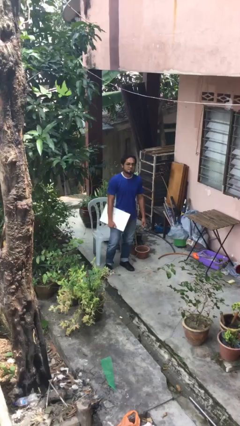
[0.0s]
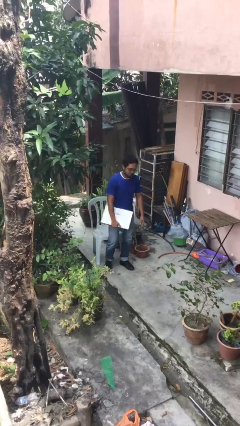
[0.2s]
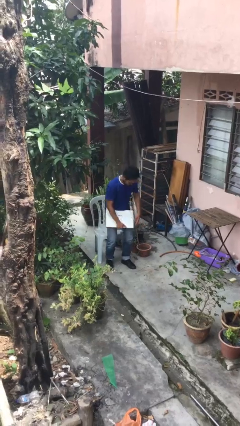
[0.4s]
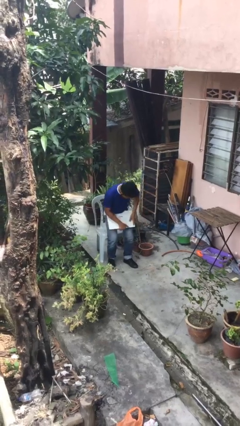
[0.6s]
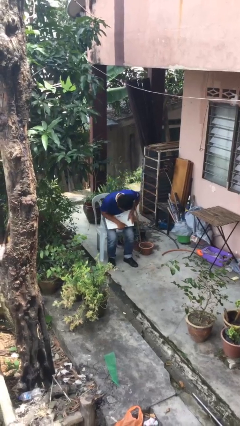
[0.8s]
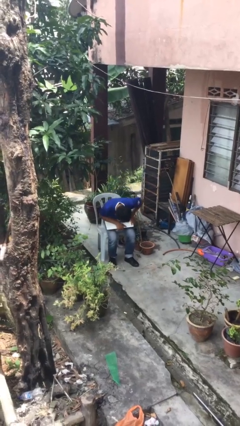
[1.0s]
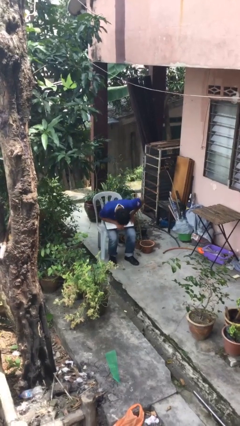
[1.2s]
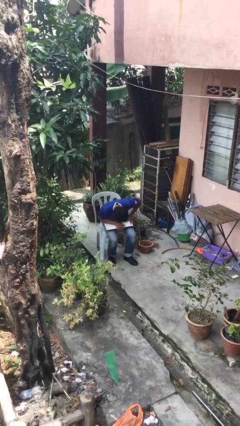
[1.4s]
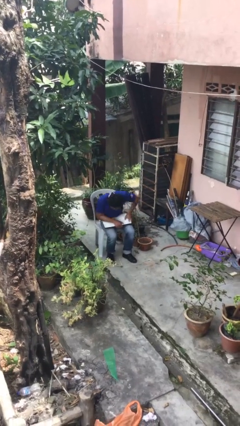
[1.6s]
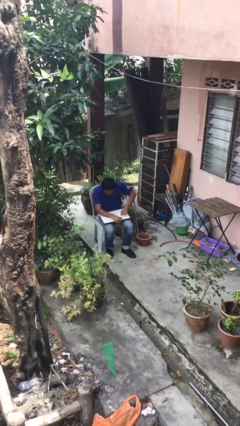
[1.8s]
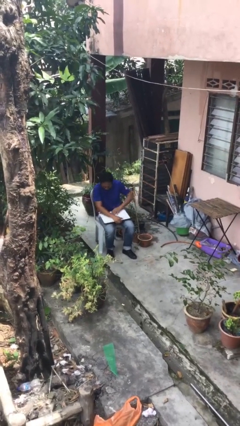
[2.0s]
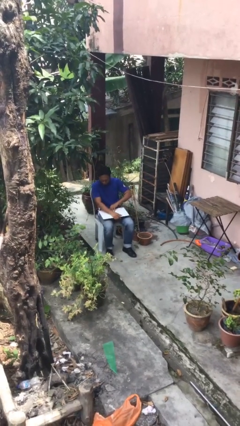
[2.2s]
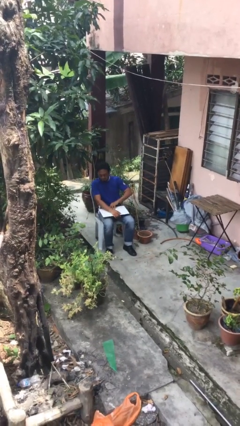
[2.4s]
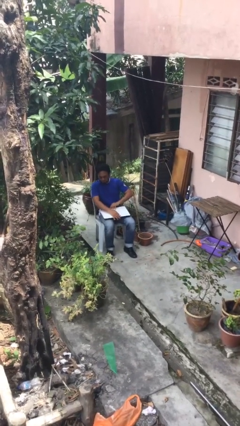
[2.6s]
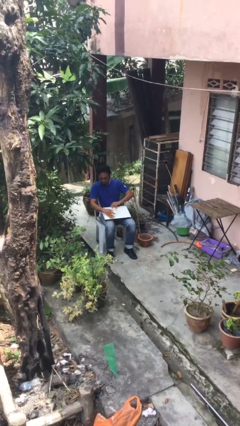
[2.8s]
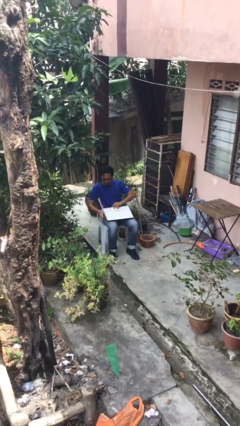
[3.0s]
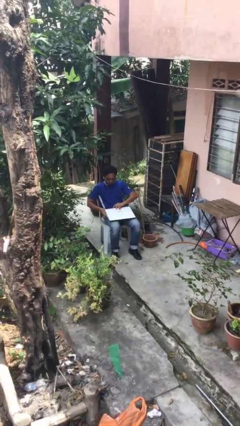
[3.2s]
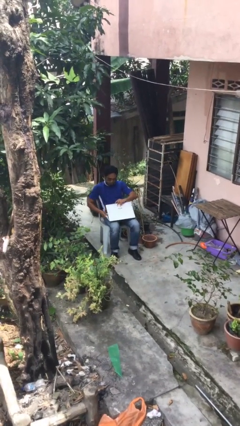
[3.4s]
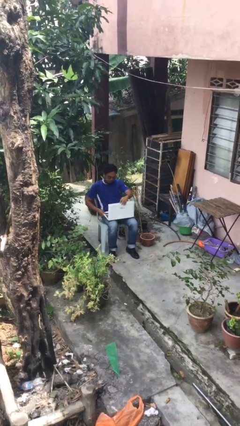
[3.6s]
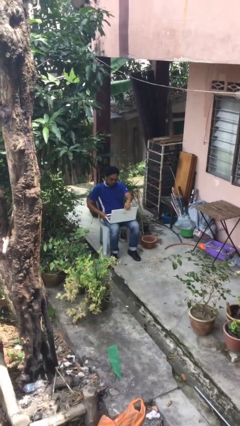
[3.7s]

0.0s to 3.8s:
person sits down

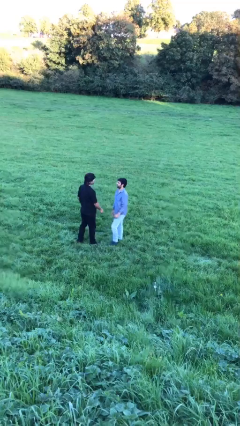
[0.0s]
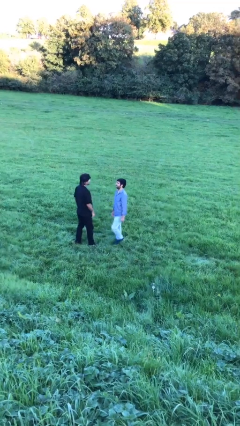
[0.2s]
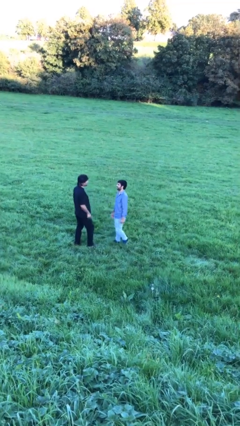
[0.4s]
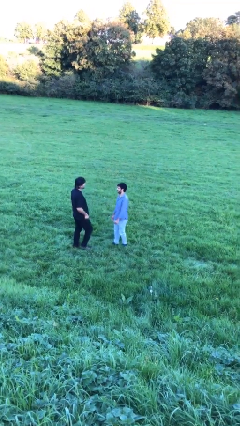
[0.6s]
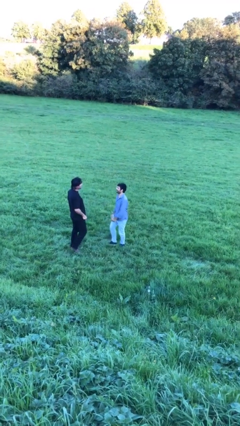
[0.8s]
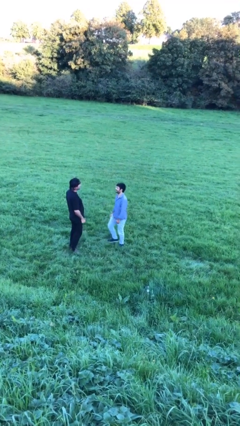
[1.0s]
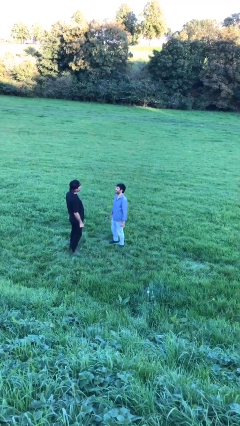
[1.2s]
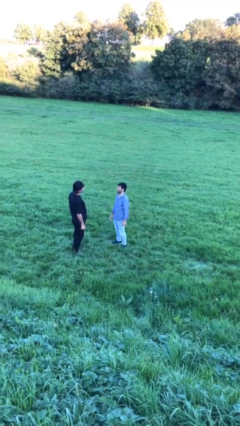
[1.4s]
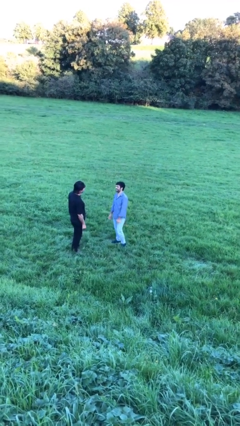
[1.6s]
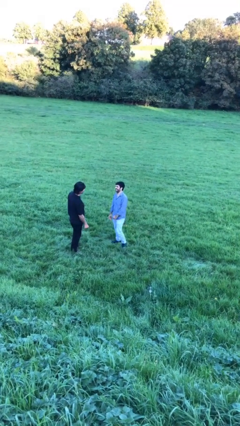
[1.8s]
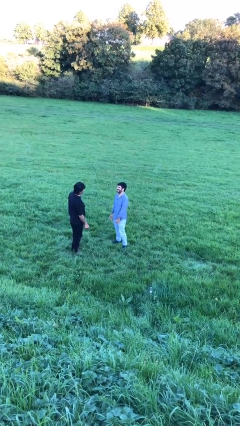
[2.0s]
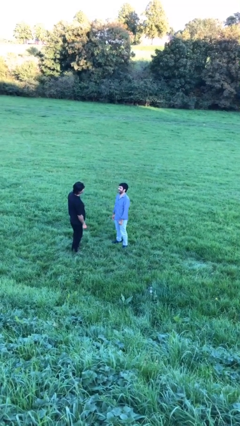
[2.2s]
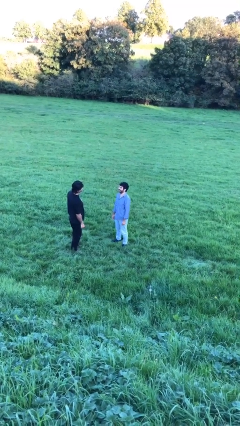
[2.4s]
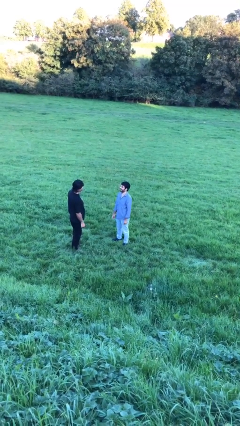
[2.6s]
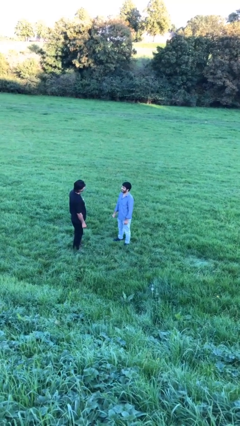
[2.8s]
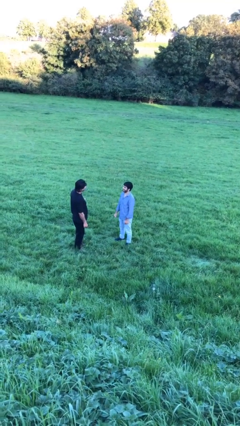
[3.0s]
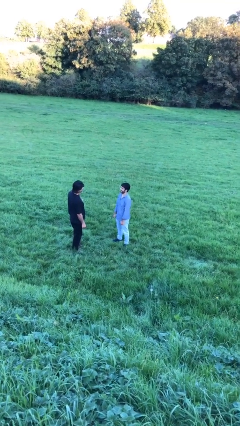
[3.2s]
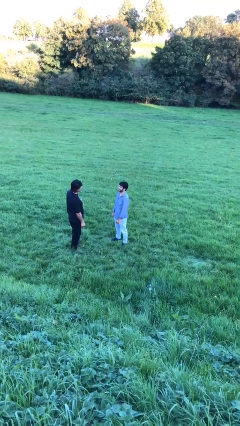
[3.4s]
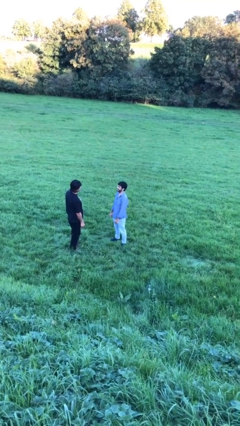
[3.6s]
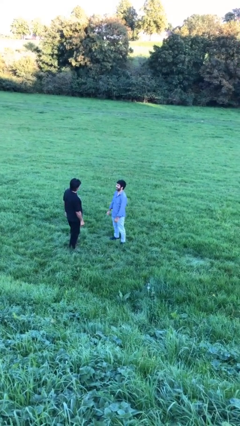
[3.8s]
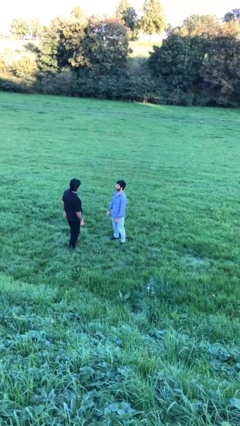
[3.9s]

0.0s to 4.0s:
person talks to person

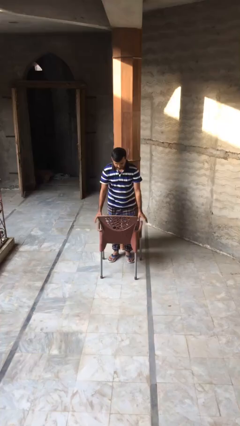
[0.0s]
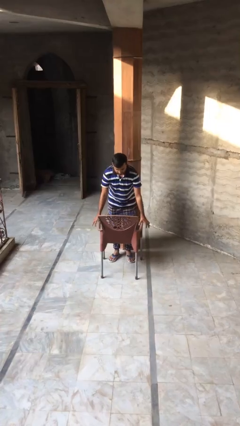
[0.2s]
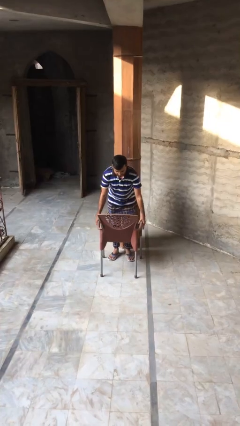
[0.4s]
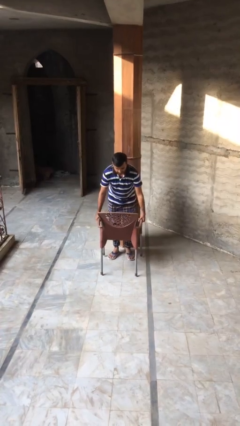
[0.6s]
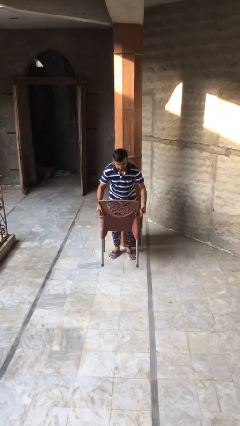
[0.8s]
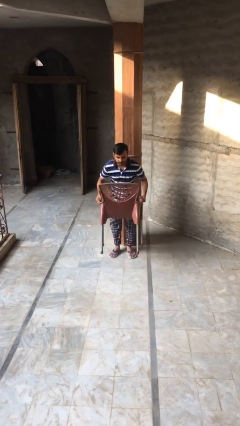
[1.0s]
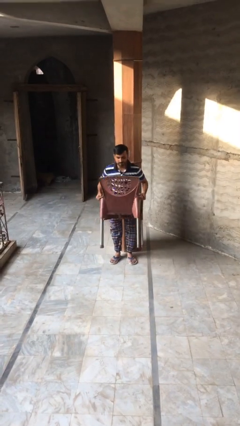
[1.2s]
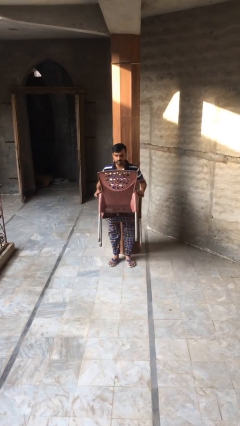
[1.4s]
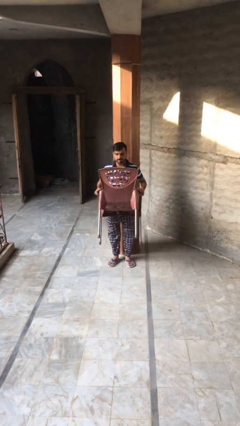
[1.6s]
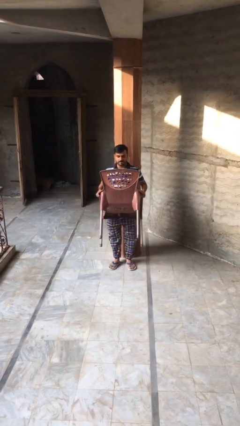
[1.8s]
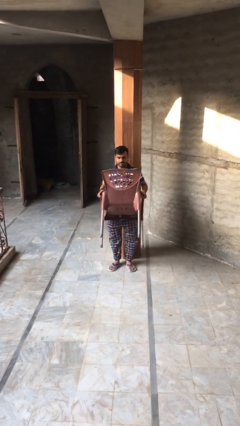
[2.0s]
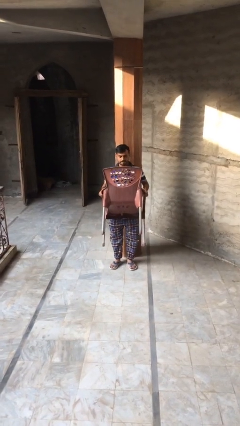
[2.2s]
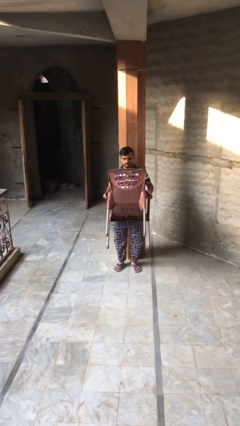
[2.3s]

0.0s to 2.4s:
person picks up object from floor

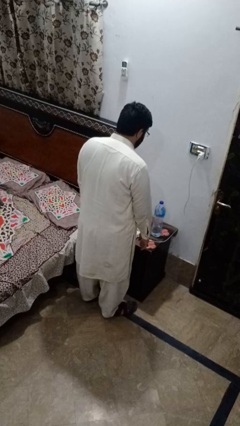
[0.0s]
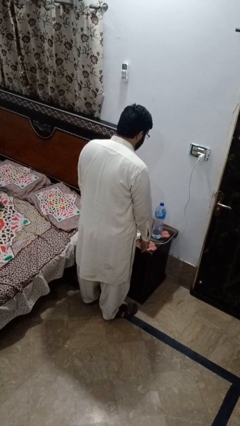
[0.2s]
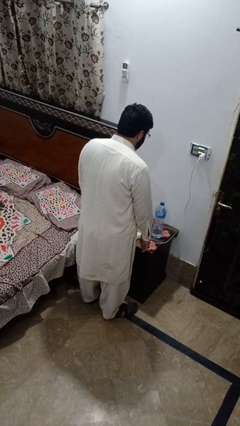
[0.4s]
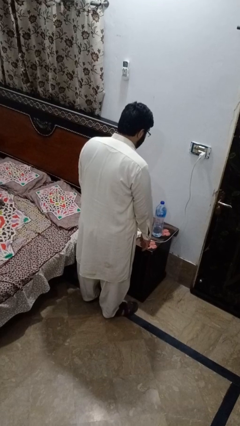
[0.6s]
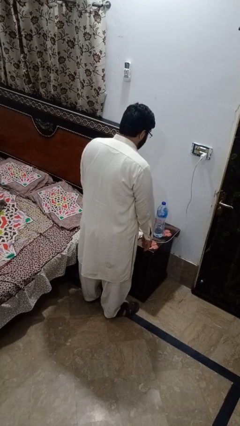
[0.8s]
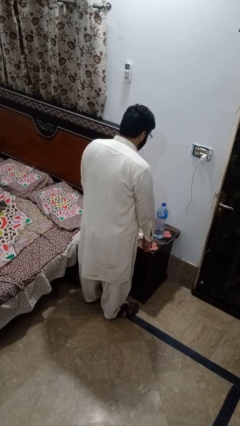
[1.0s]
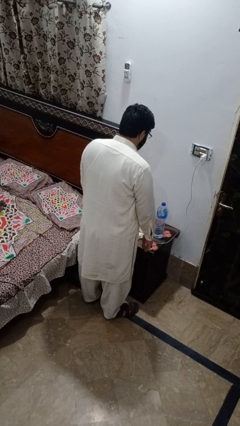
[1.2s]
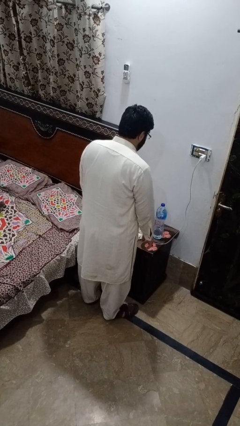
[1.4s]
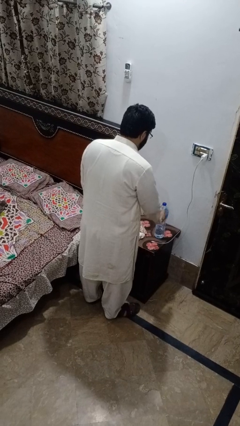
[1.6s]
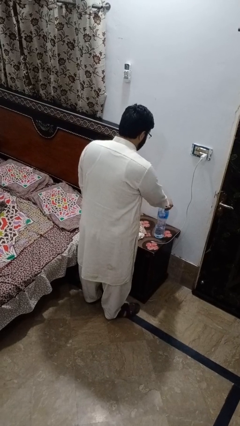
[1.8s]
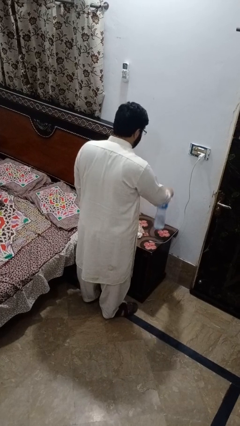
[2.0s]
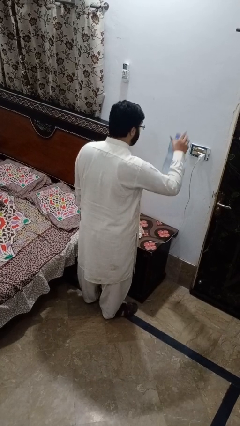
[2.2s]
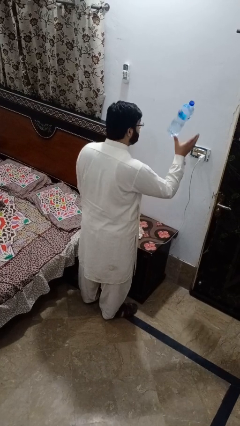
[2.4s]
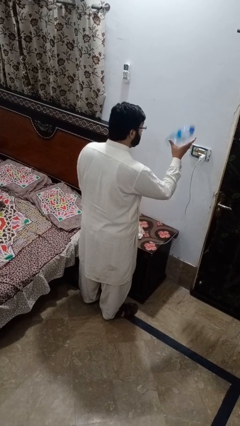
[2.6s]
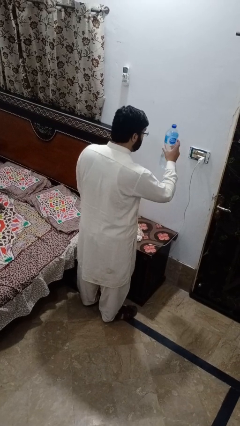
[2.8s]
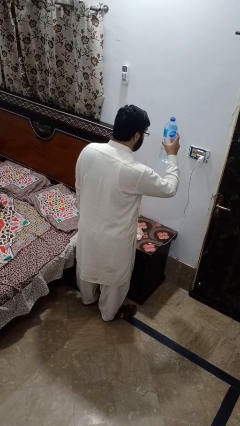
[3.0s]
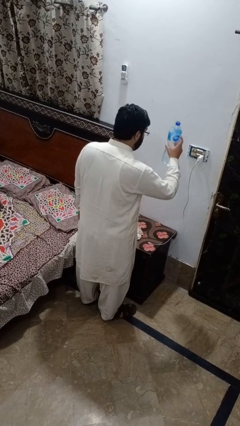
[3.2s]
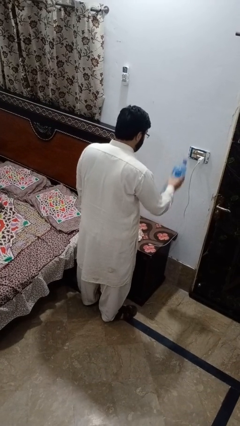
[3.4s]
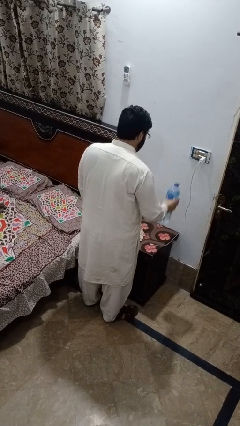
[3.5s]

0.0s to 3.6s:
person picks up object from countertop

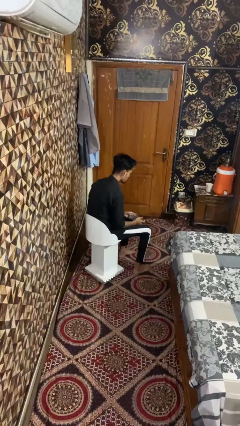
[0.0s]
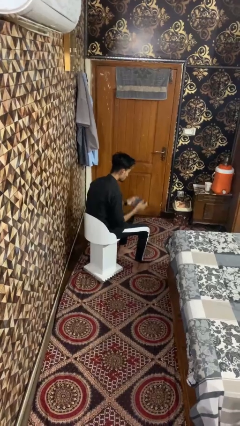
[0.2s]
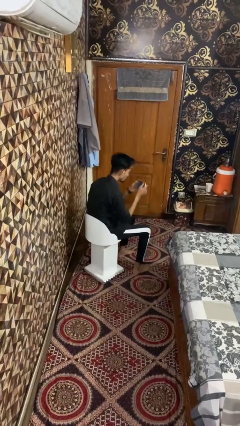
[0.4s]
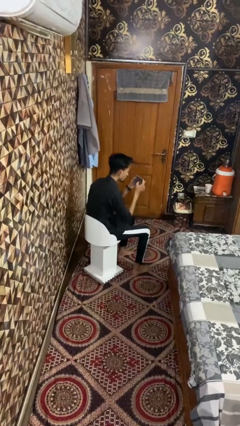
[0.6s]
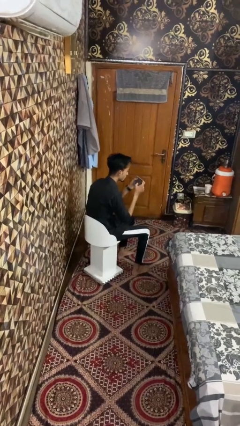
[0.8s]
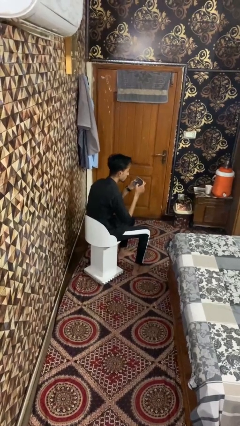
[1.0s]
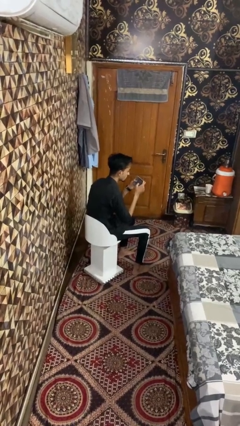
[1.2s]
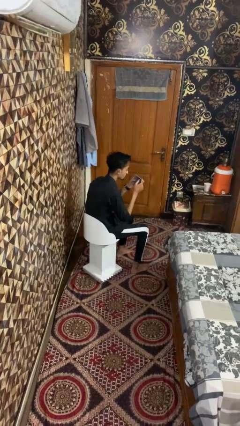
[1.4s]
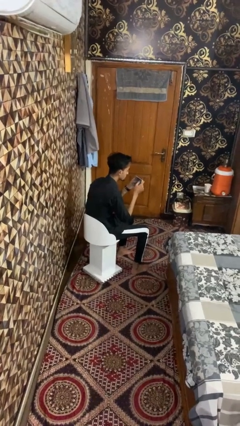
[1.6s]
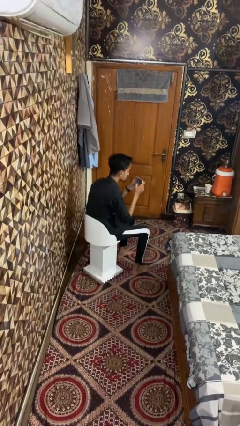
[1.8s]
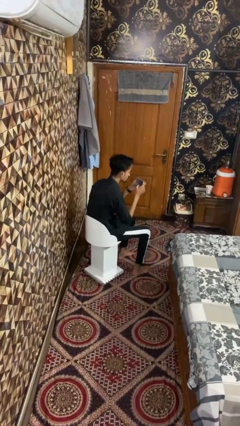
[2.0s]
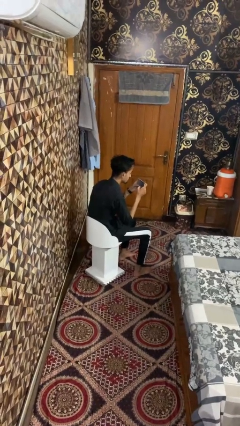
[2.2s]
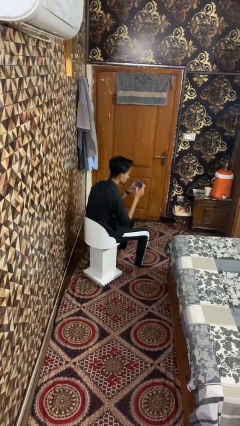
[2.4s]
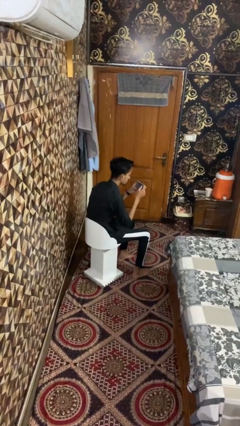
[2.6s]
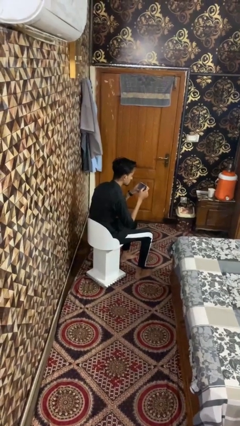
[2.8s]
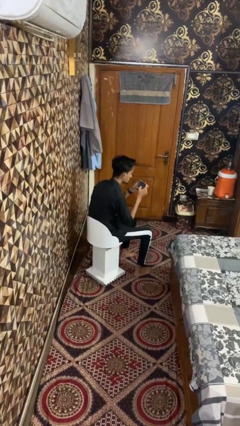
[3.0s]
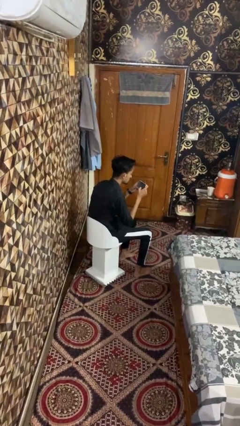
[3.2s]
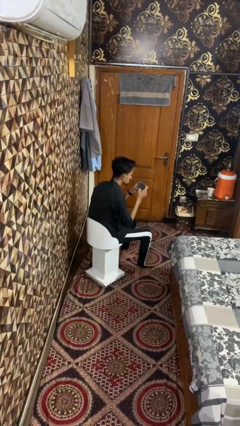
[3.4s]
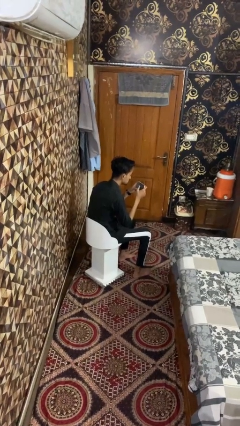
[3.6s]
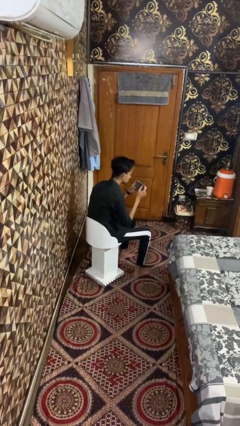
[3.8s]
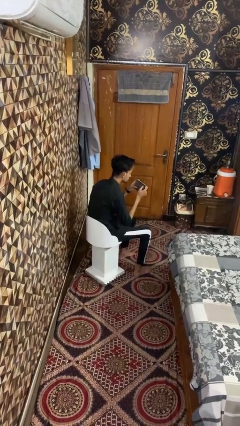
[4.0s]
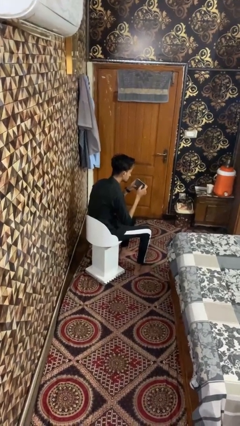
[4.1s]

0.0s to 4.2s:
person taps object with finger
